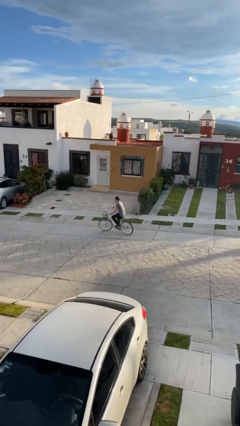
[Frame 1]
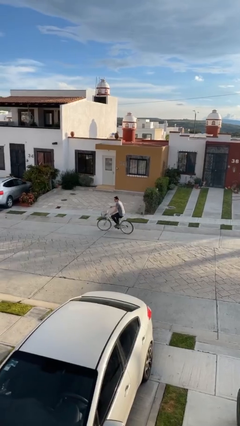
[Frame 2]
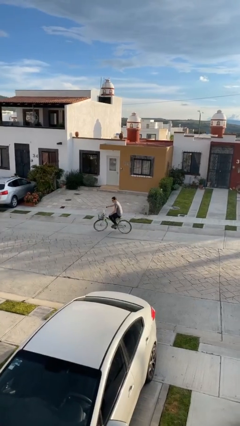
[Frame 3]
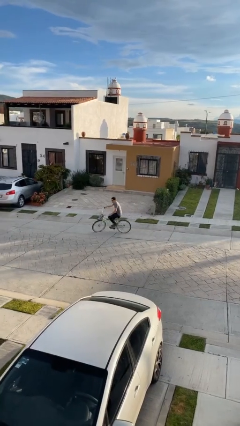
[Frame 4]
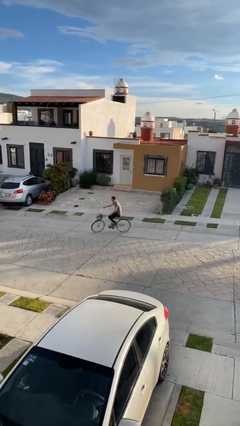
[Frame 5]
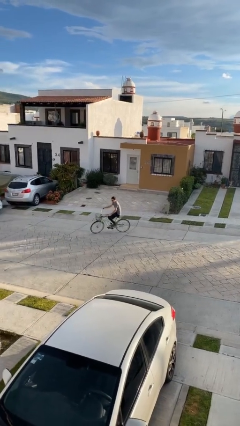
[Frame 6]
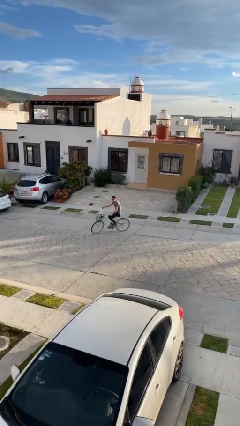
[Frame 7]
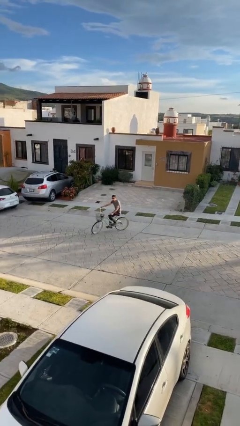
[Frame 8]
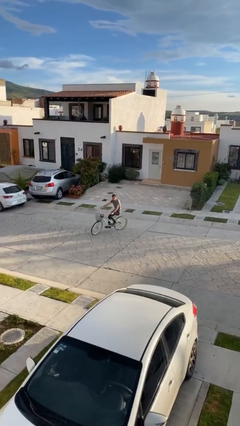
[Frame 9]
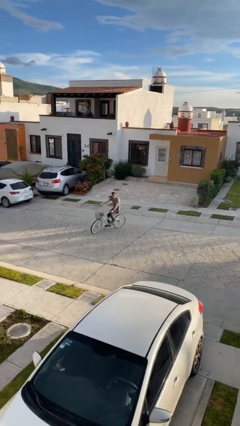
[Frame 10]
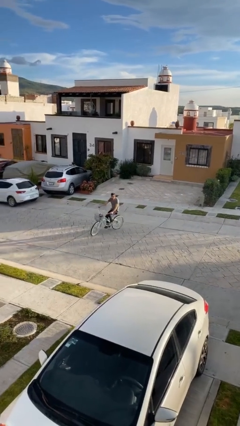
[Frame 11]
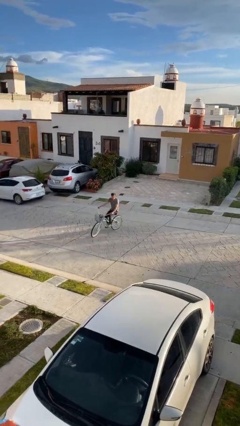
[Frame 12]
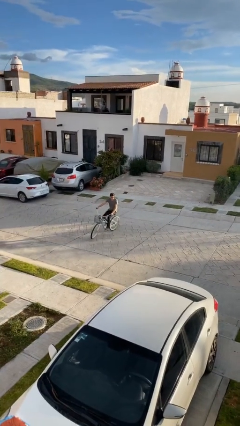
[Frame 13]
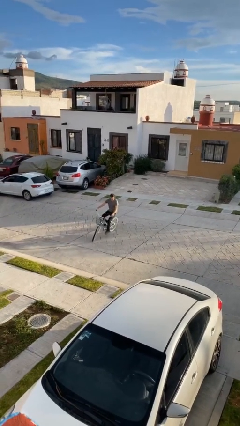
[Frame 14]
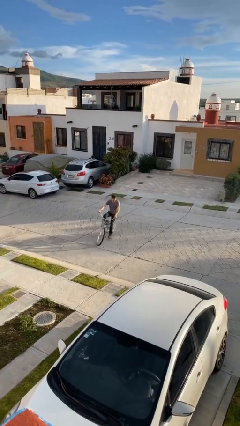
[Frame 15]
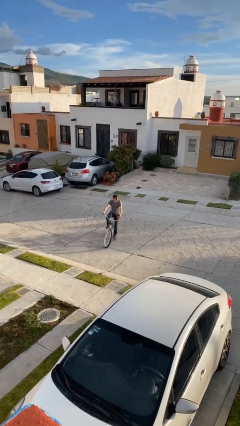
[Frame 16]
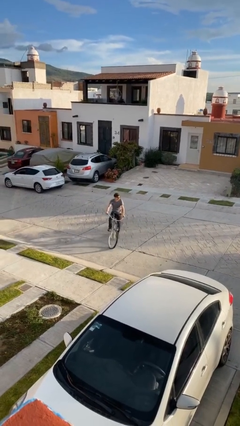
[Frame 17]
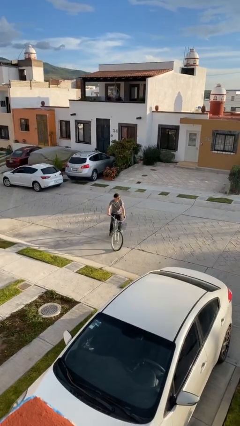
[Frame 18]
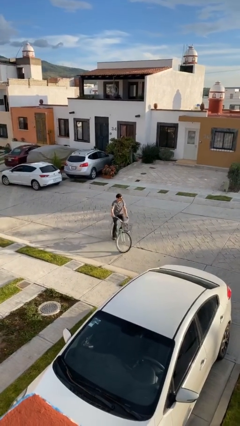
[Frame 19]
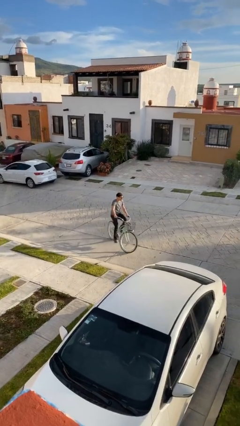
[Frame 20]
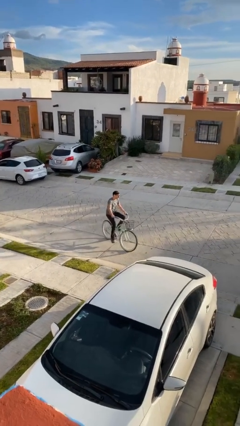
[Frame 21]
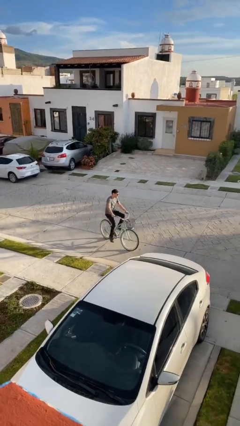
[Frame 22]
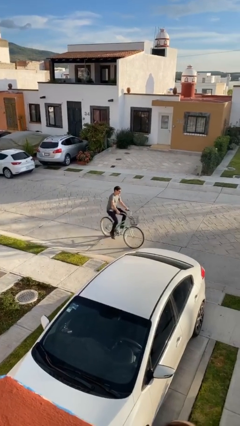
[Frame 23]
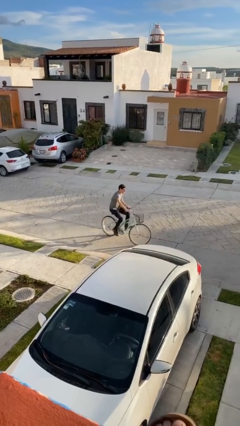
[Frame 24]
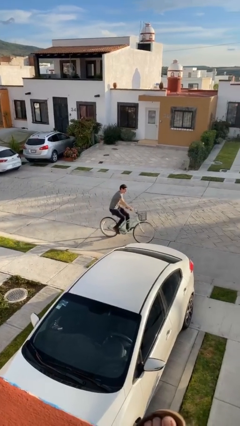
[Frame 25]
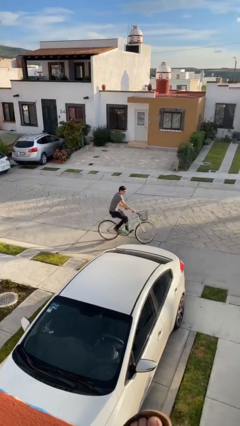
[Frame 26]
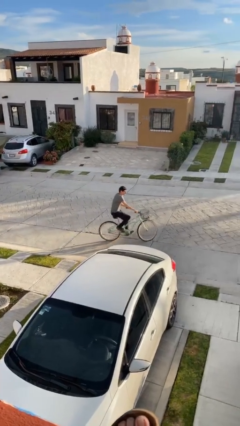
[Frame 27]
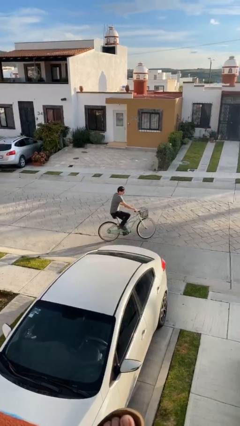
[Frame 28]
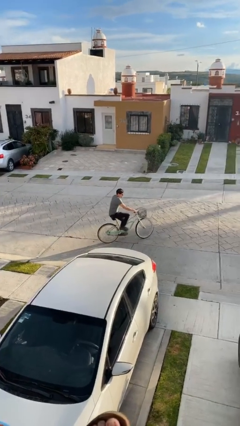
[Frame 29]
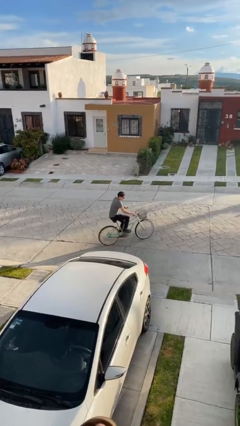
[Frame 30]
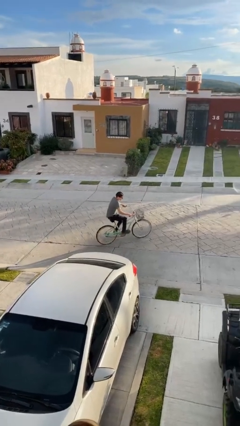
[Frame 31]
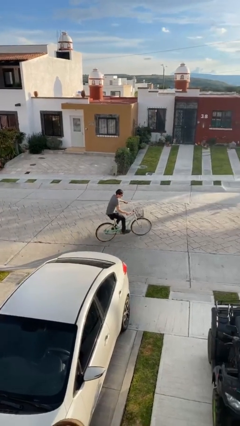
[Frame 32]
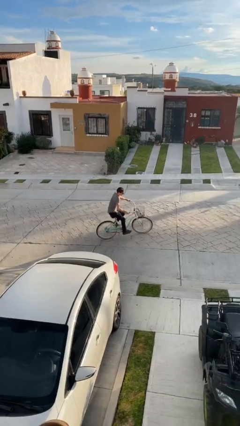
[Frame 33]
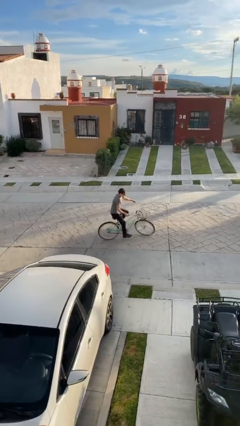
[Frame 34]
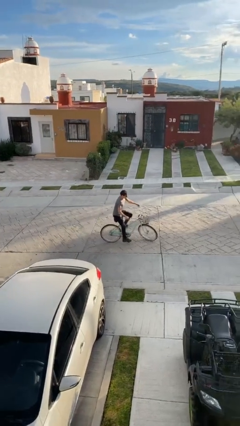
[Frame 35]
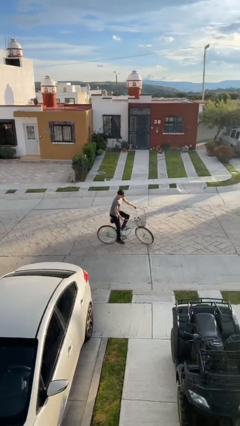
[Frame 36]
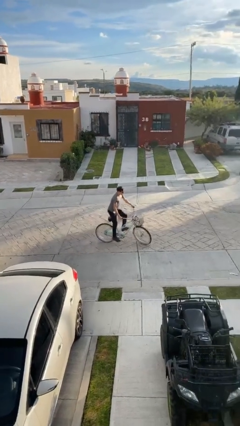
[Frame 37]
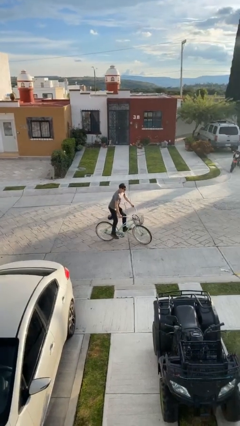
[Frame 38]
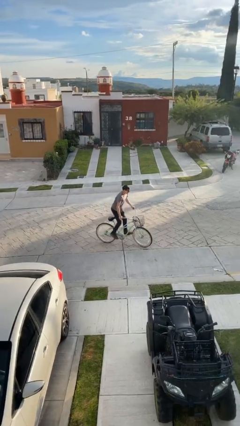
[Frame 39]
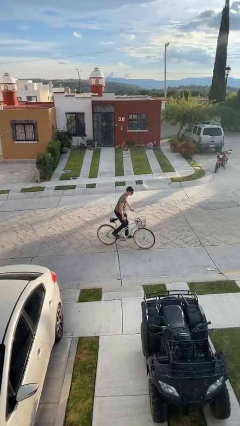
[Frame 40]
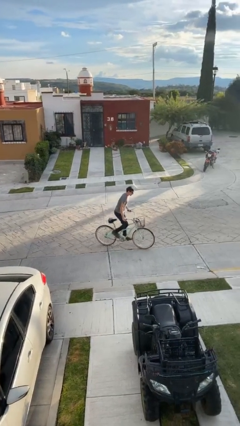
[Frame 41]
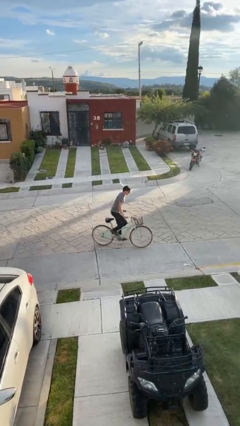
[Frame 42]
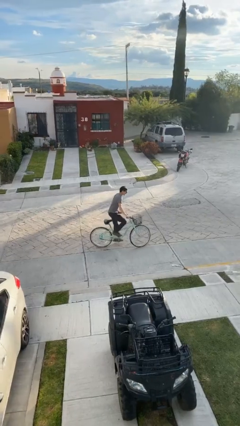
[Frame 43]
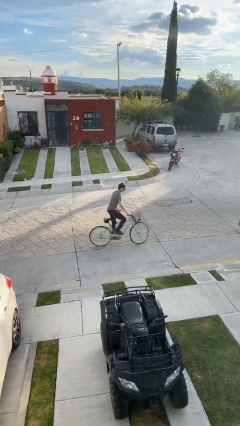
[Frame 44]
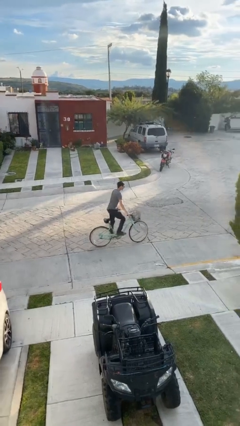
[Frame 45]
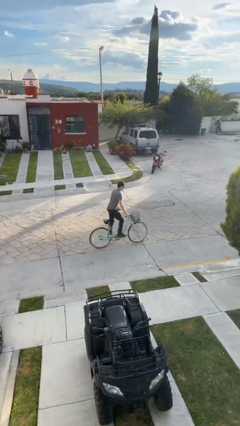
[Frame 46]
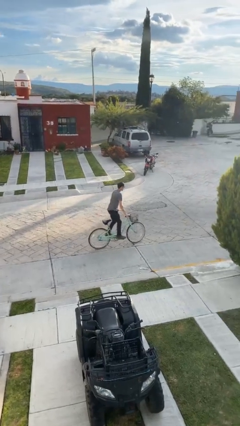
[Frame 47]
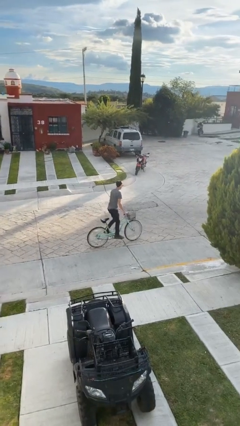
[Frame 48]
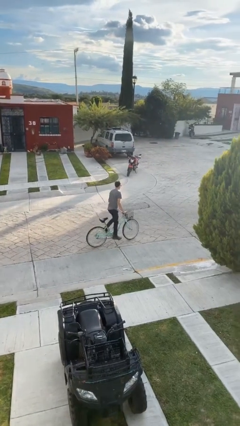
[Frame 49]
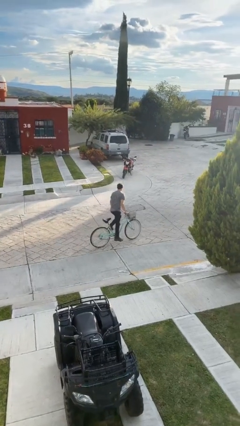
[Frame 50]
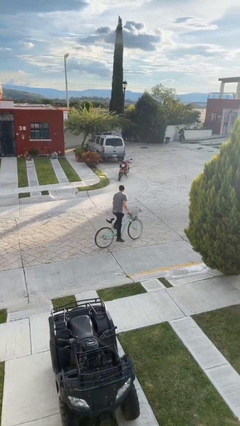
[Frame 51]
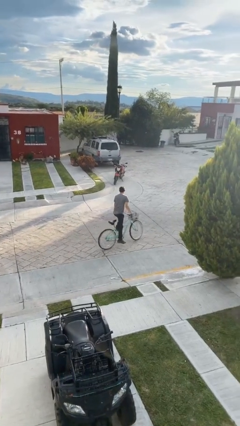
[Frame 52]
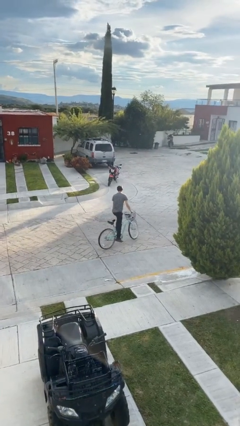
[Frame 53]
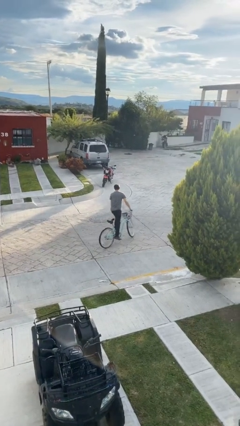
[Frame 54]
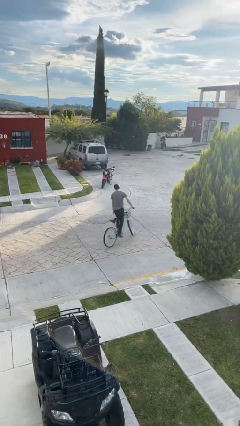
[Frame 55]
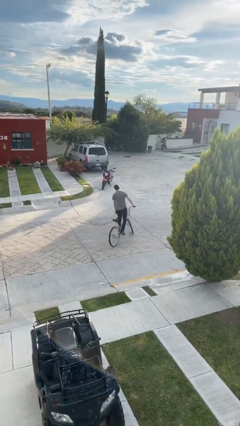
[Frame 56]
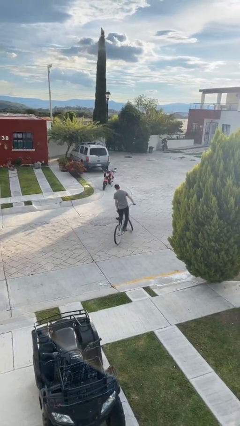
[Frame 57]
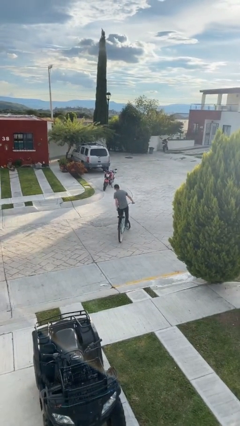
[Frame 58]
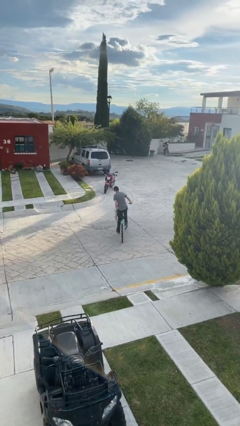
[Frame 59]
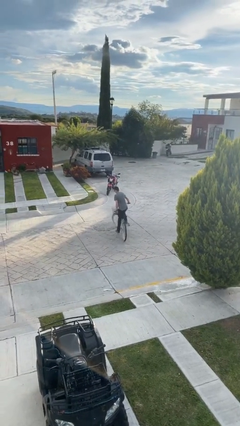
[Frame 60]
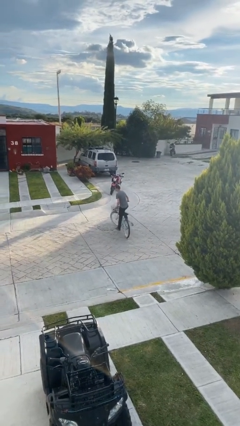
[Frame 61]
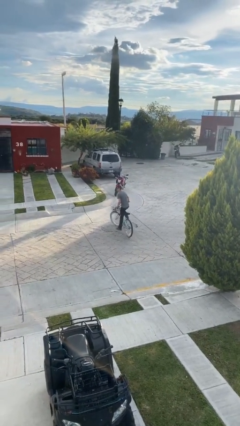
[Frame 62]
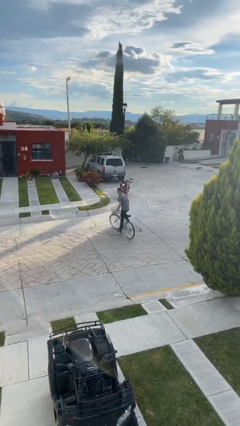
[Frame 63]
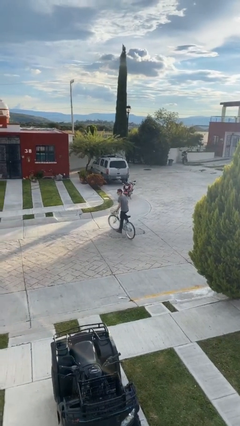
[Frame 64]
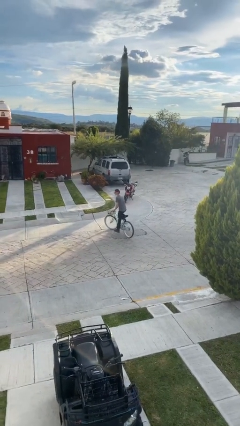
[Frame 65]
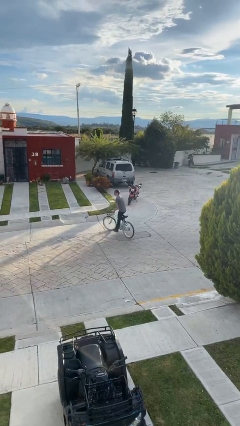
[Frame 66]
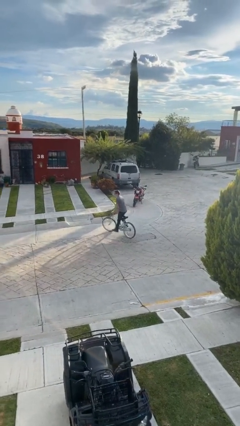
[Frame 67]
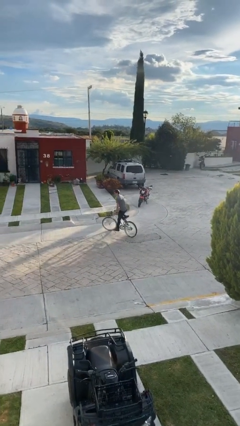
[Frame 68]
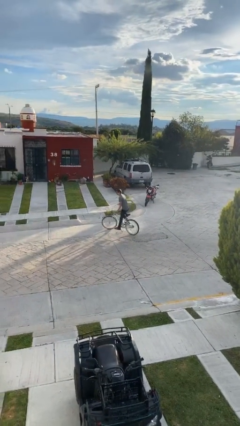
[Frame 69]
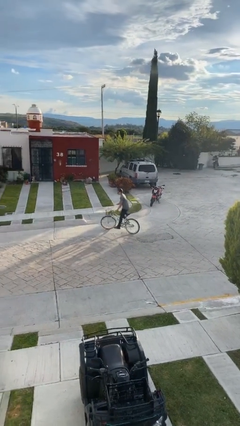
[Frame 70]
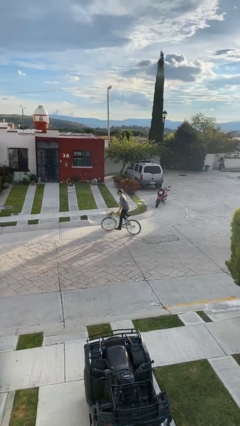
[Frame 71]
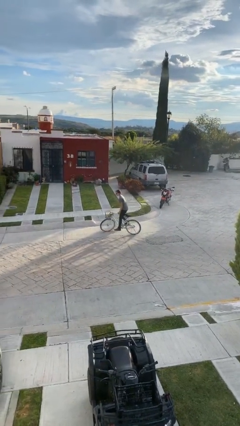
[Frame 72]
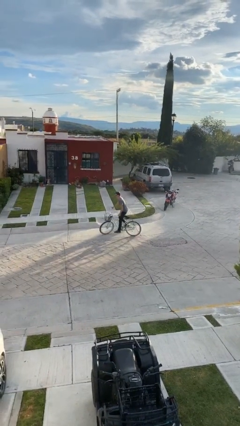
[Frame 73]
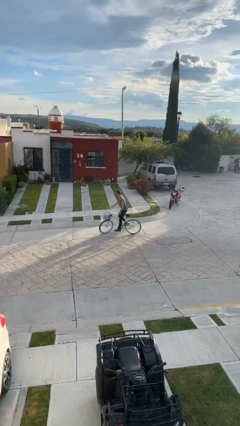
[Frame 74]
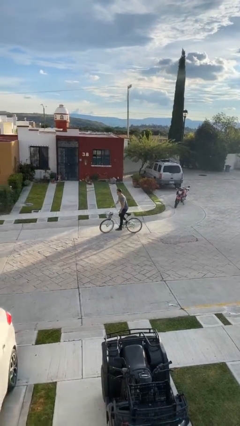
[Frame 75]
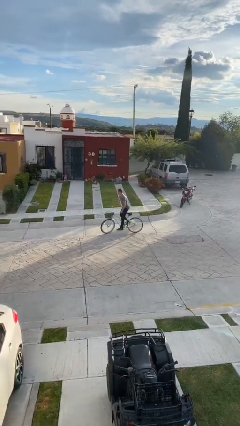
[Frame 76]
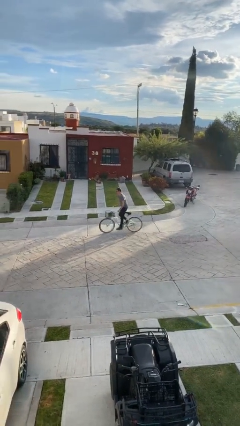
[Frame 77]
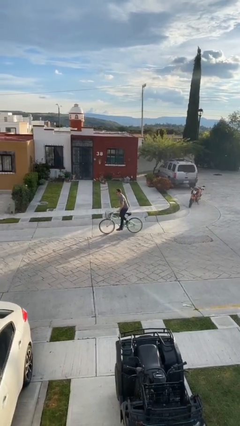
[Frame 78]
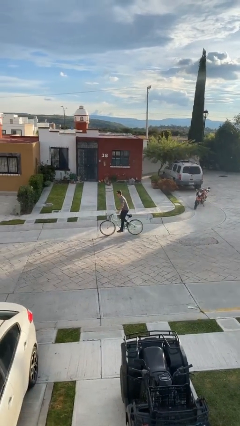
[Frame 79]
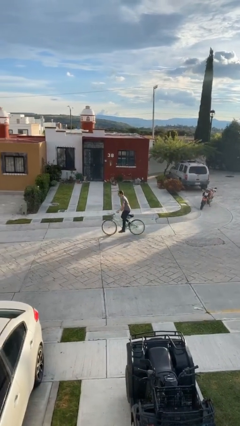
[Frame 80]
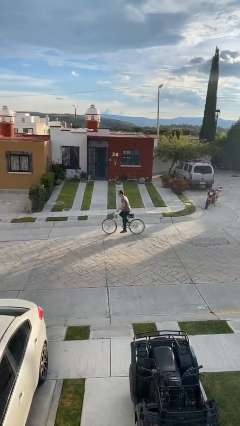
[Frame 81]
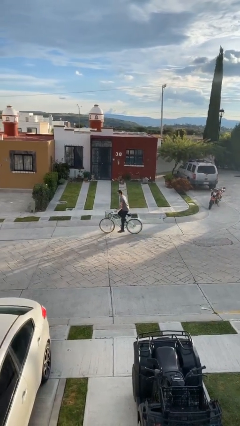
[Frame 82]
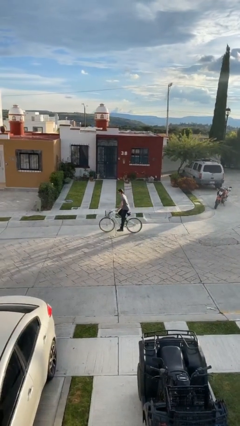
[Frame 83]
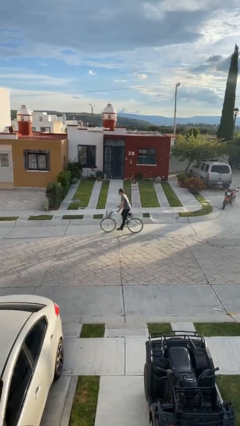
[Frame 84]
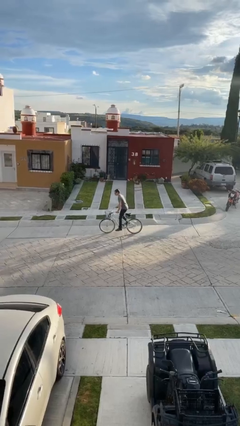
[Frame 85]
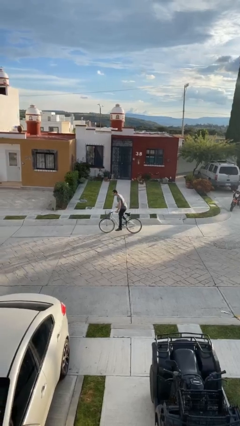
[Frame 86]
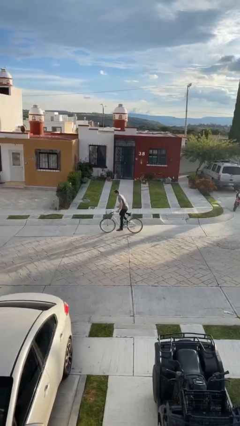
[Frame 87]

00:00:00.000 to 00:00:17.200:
person rides bicycle

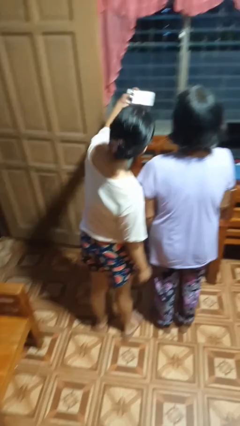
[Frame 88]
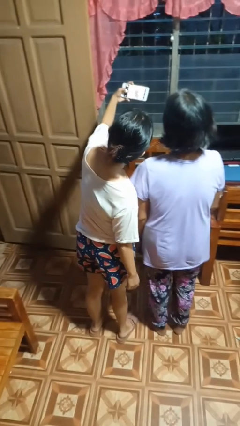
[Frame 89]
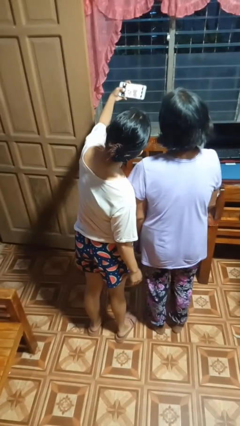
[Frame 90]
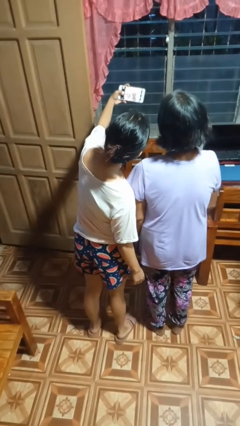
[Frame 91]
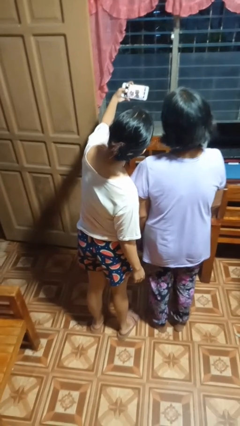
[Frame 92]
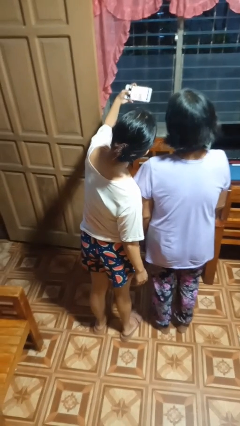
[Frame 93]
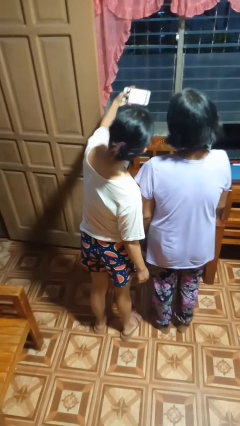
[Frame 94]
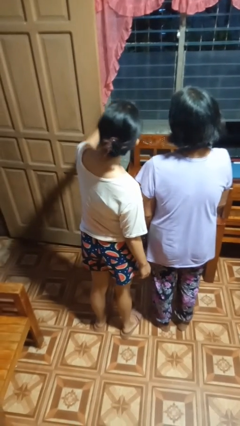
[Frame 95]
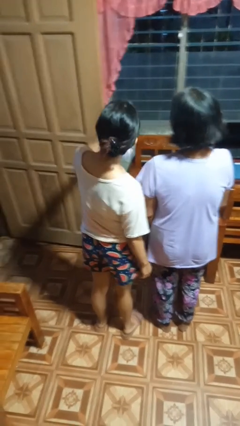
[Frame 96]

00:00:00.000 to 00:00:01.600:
person takes selfie with person
